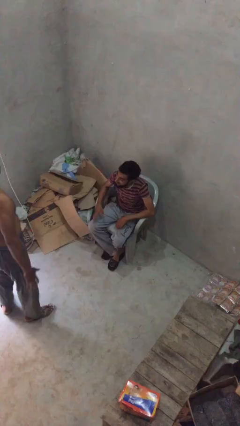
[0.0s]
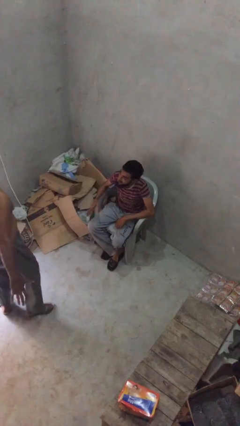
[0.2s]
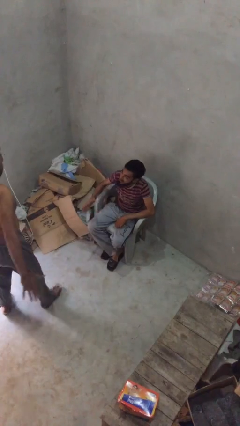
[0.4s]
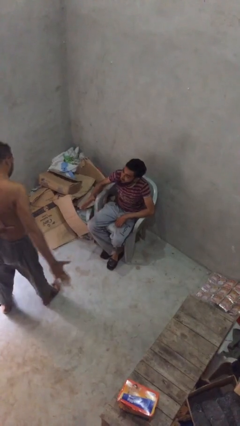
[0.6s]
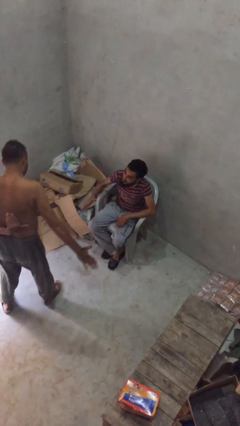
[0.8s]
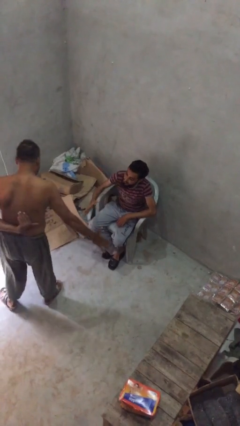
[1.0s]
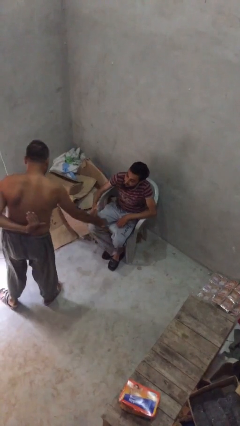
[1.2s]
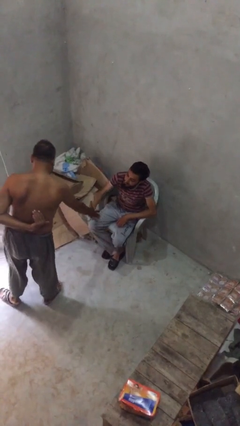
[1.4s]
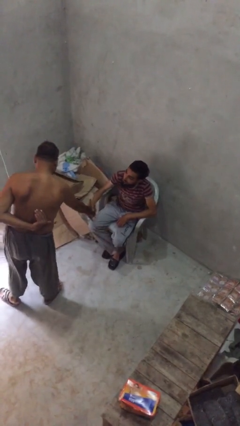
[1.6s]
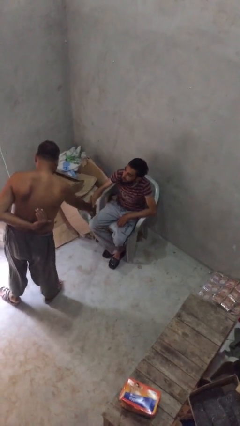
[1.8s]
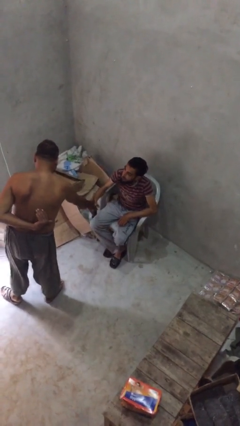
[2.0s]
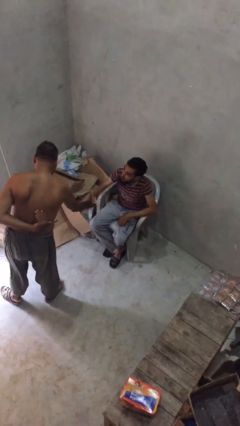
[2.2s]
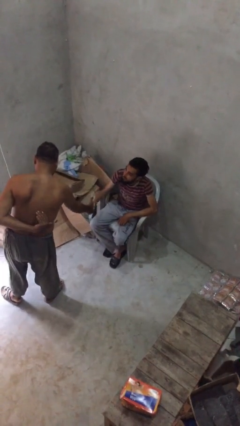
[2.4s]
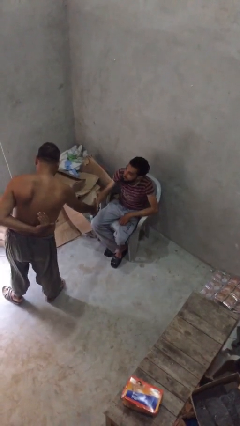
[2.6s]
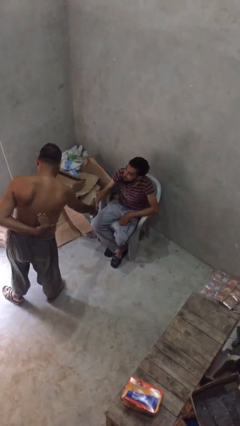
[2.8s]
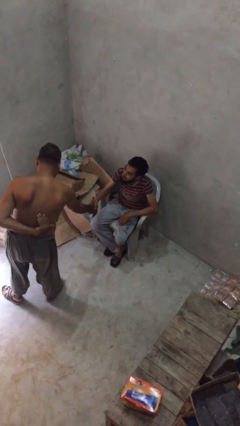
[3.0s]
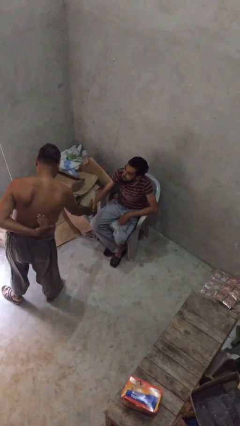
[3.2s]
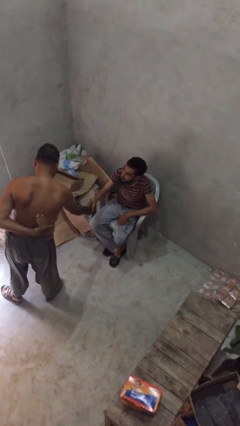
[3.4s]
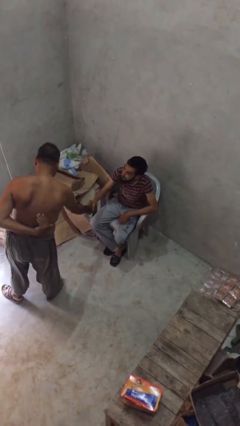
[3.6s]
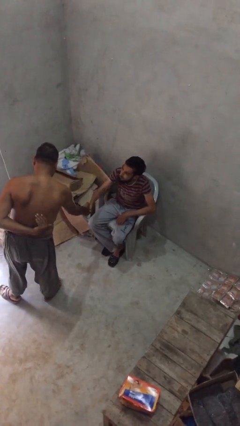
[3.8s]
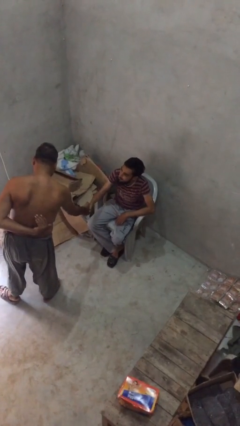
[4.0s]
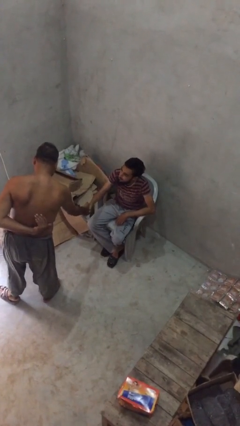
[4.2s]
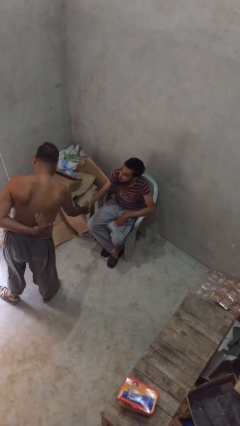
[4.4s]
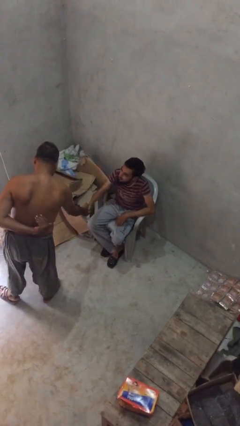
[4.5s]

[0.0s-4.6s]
person shakes hand

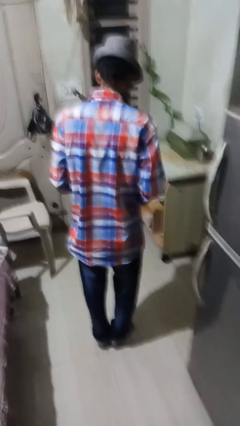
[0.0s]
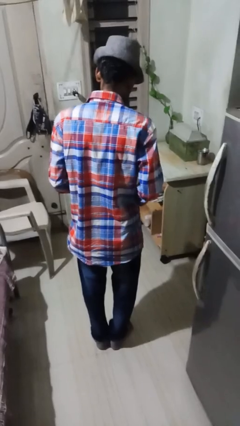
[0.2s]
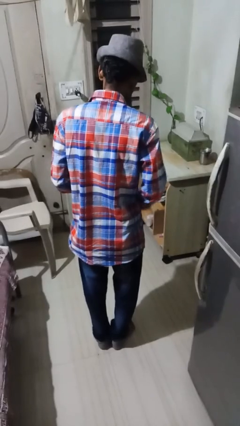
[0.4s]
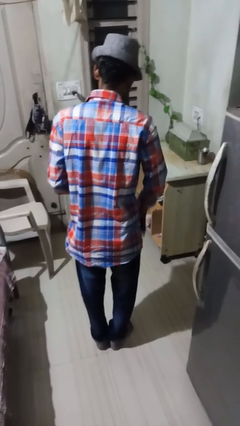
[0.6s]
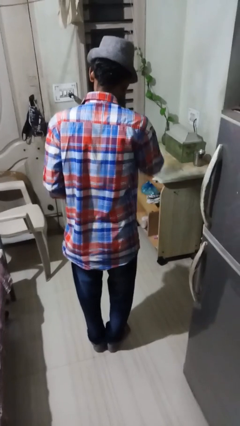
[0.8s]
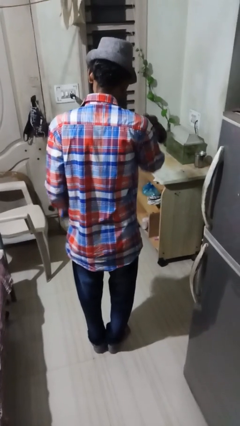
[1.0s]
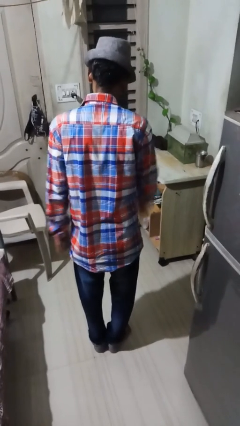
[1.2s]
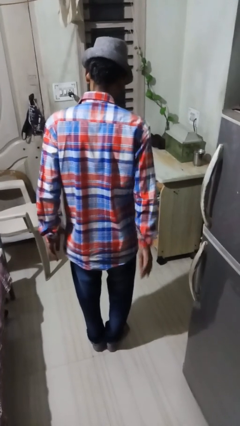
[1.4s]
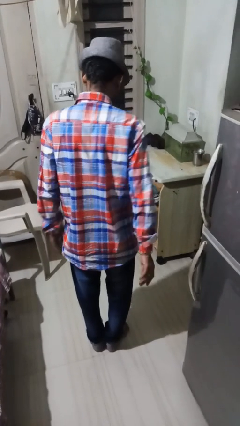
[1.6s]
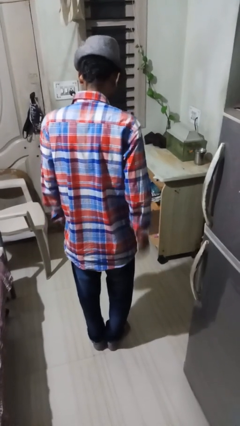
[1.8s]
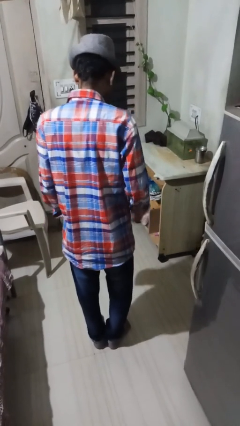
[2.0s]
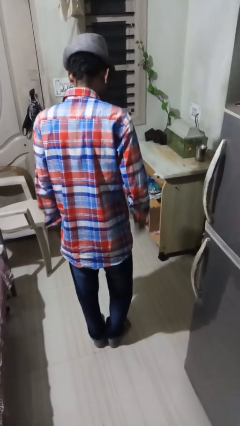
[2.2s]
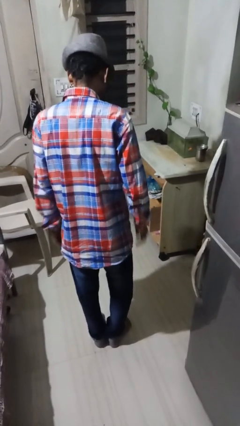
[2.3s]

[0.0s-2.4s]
person throws object on table

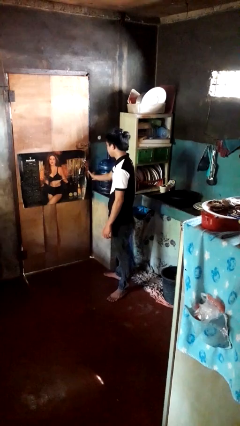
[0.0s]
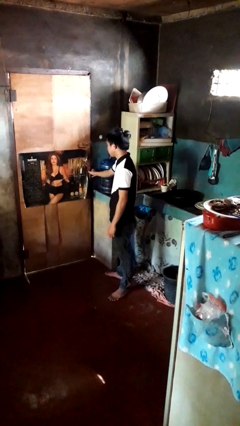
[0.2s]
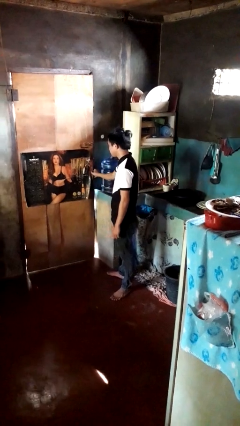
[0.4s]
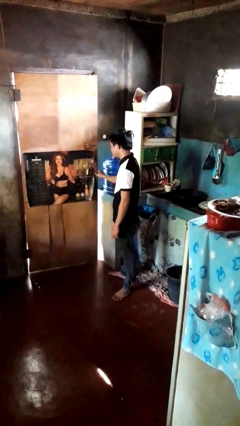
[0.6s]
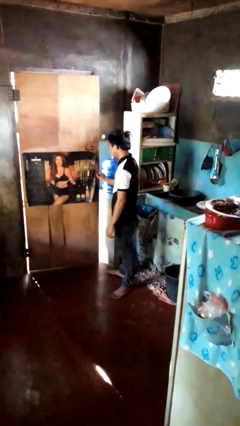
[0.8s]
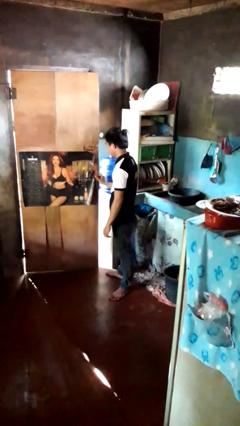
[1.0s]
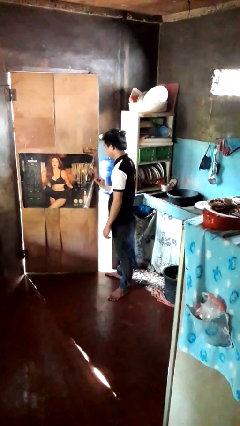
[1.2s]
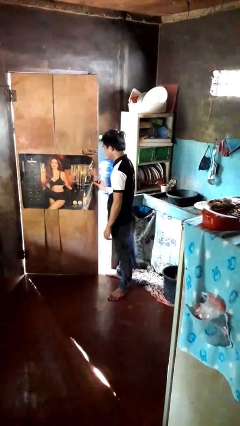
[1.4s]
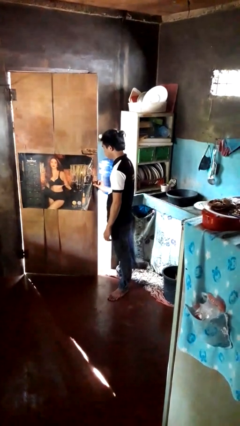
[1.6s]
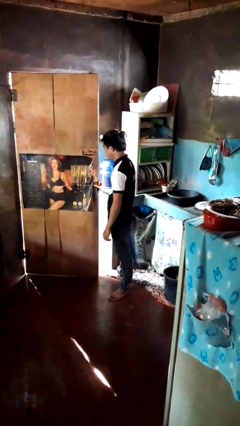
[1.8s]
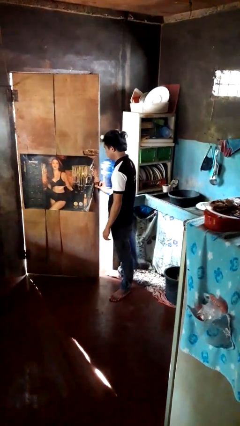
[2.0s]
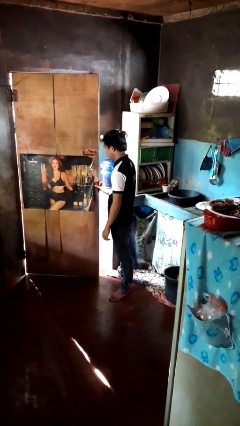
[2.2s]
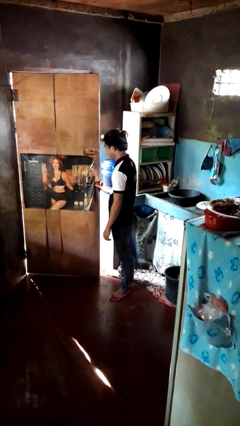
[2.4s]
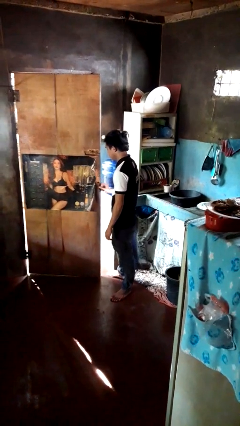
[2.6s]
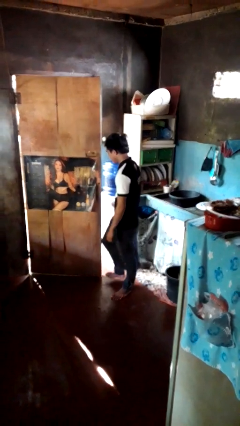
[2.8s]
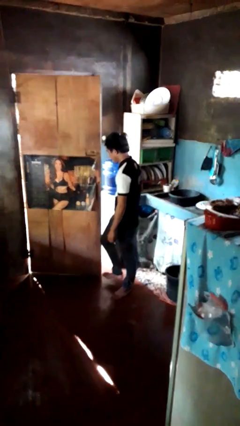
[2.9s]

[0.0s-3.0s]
person opens facility door

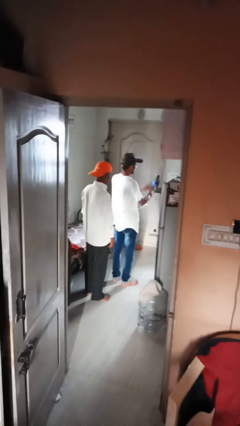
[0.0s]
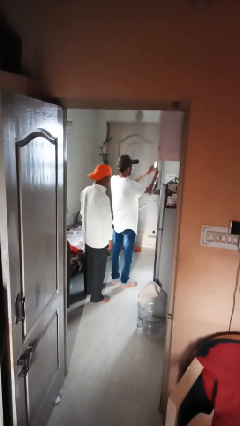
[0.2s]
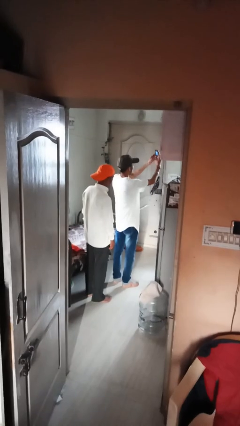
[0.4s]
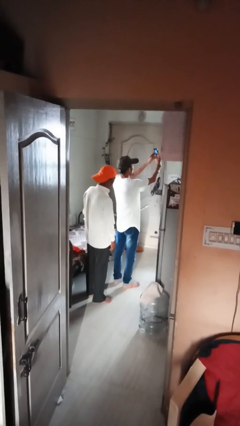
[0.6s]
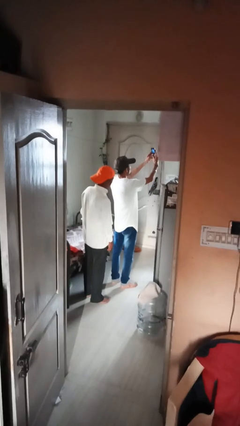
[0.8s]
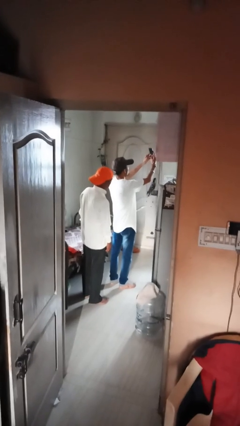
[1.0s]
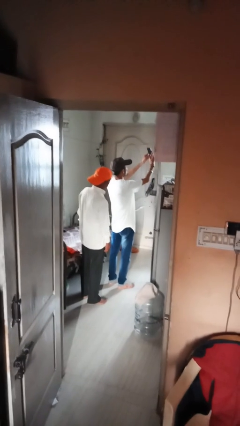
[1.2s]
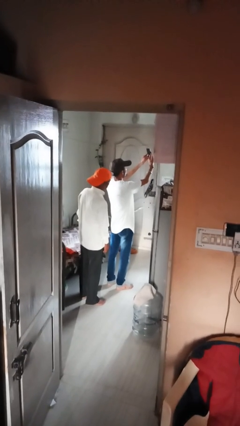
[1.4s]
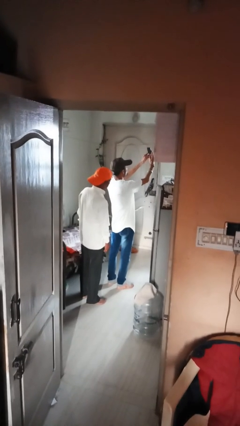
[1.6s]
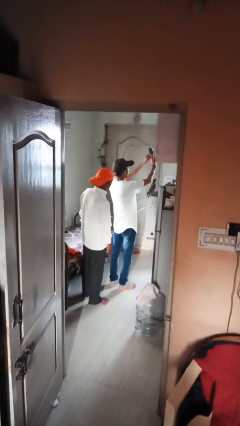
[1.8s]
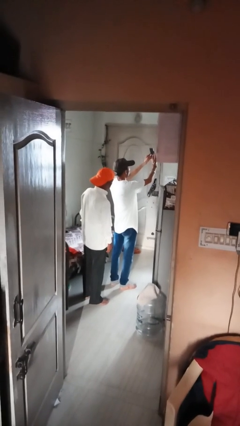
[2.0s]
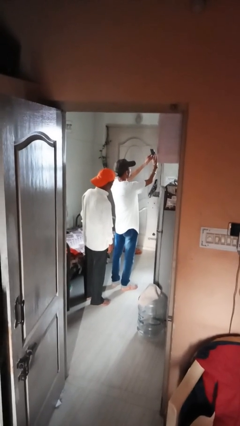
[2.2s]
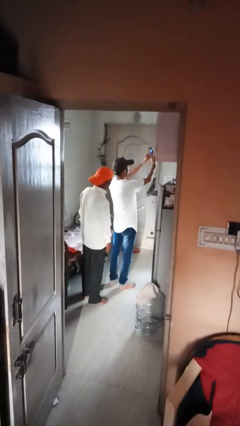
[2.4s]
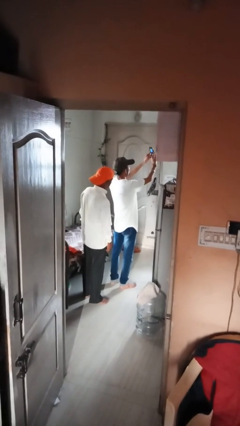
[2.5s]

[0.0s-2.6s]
person takes selfie with person

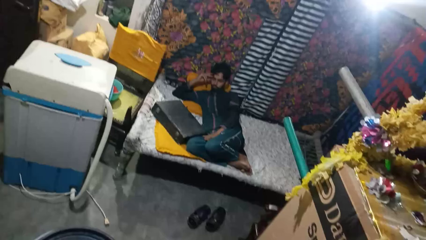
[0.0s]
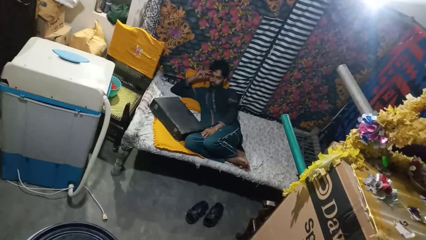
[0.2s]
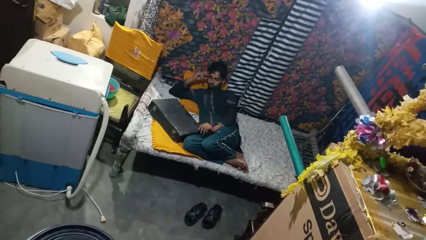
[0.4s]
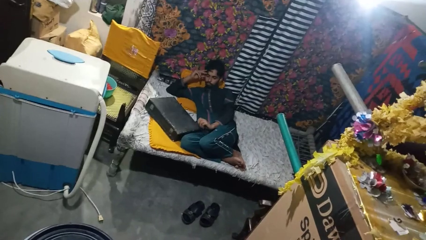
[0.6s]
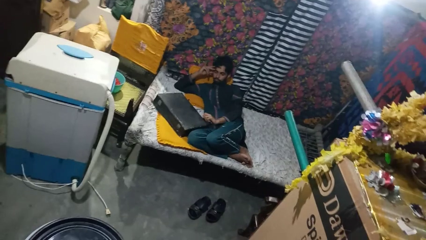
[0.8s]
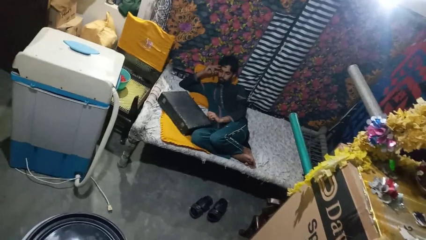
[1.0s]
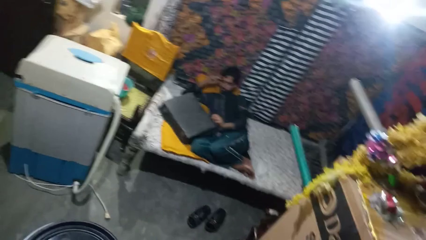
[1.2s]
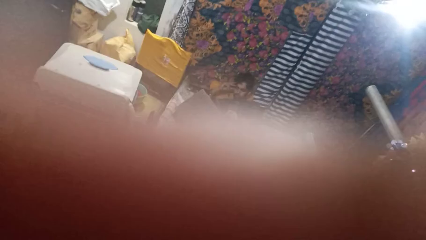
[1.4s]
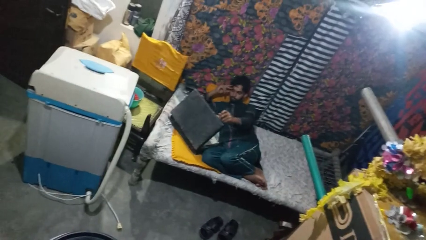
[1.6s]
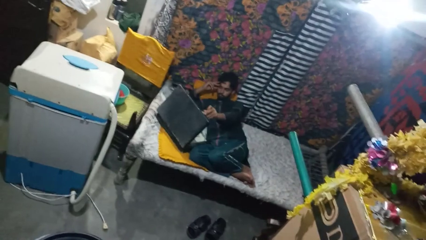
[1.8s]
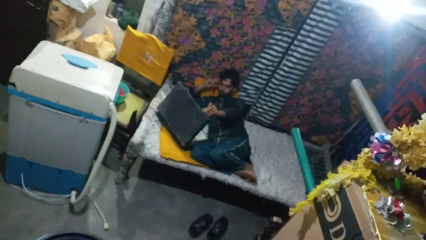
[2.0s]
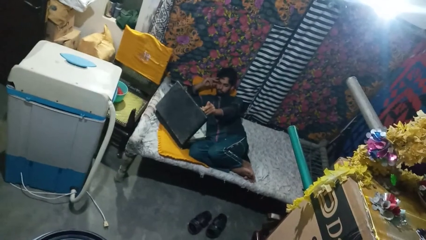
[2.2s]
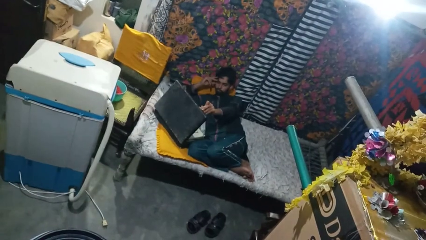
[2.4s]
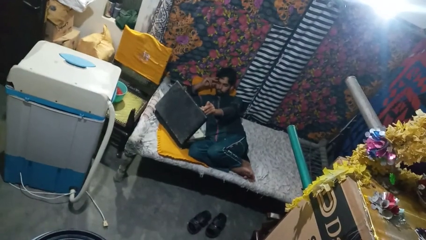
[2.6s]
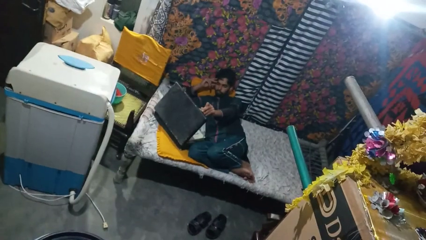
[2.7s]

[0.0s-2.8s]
person opens suitcase

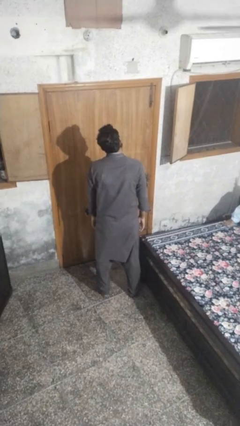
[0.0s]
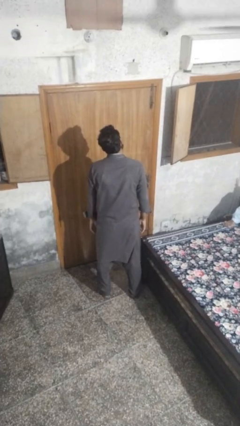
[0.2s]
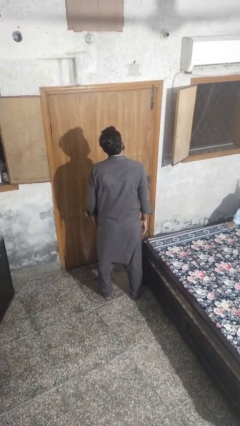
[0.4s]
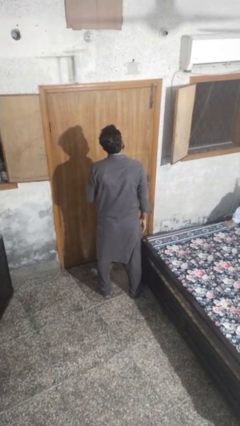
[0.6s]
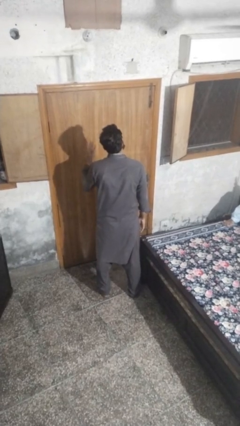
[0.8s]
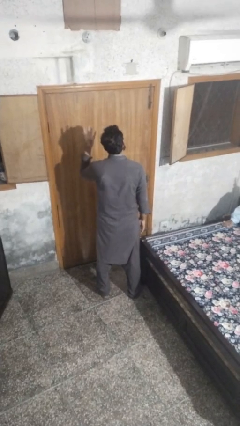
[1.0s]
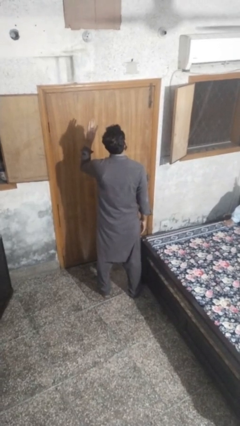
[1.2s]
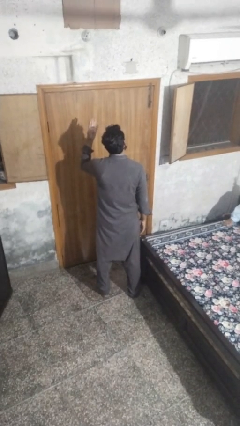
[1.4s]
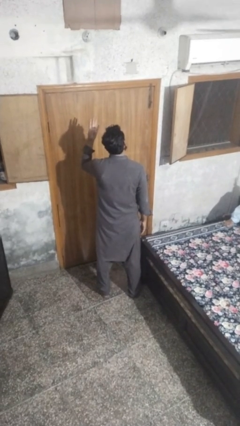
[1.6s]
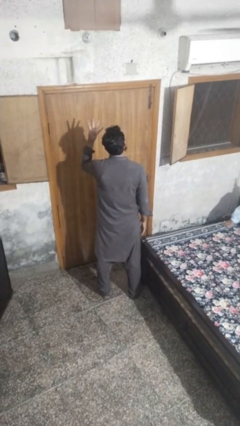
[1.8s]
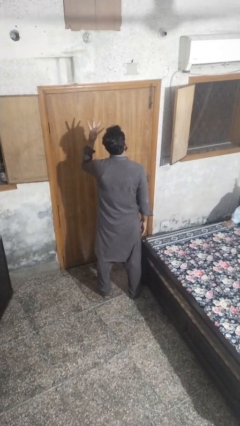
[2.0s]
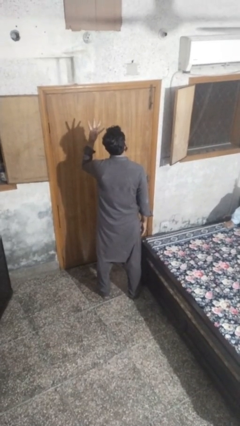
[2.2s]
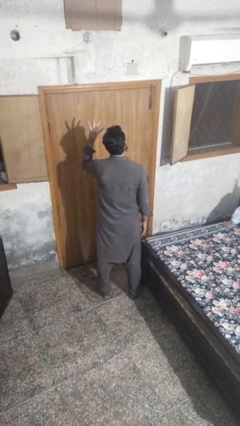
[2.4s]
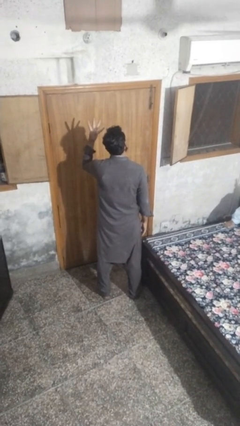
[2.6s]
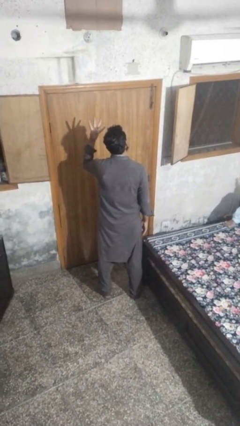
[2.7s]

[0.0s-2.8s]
person gestures number four
